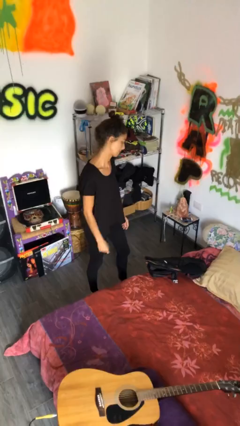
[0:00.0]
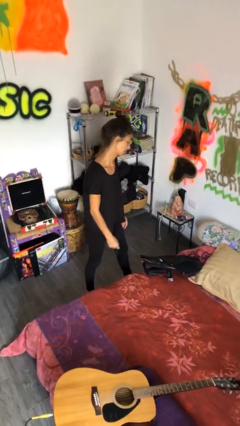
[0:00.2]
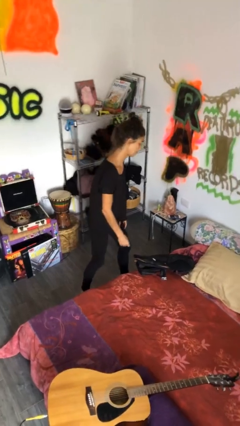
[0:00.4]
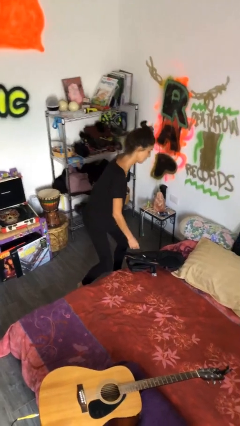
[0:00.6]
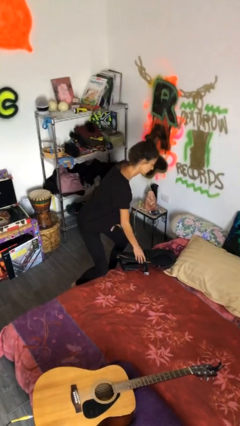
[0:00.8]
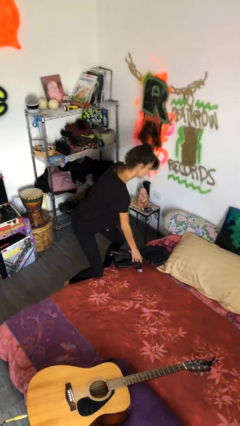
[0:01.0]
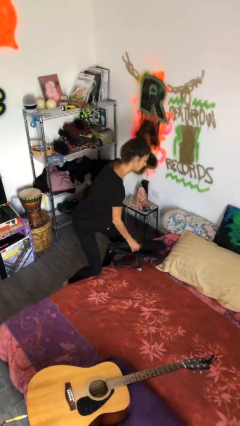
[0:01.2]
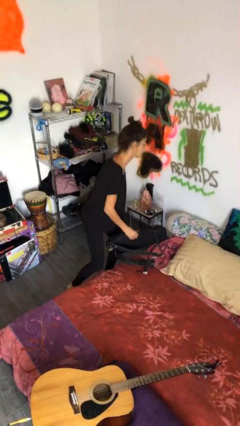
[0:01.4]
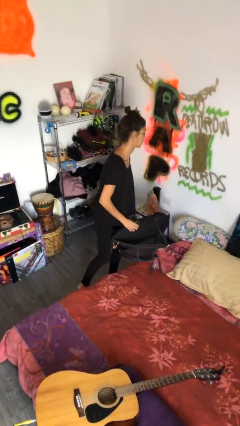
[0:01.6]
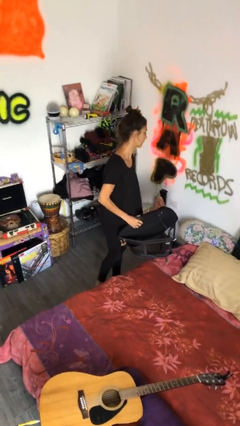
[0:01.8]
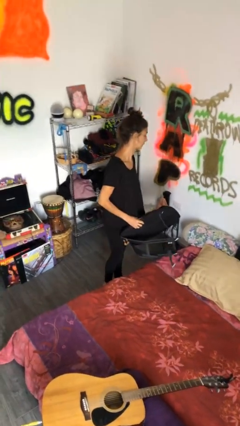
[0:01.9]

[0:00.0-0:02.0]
person picks up object from bed

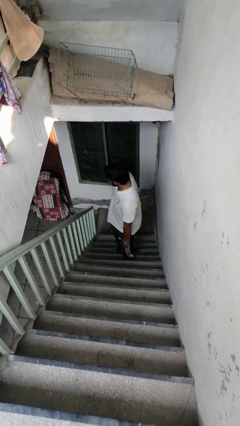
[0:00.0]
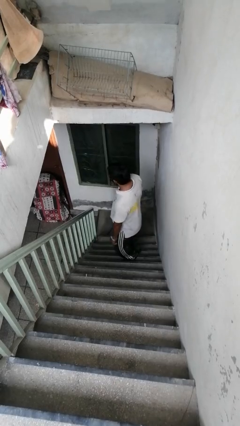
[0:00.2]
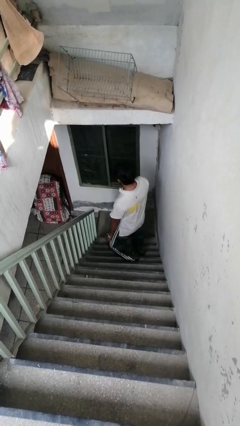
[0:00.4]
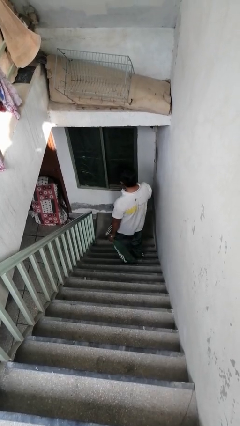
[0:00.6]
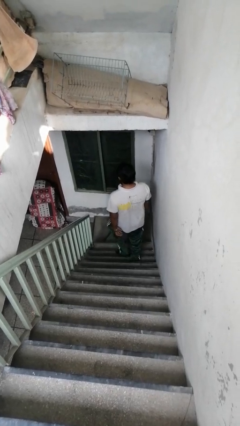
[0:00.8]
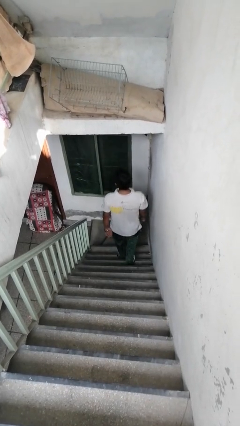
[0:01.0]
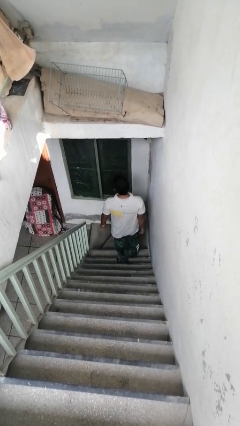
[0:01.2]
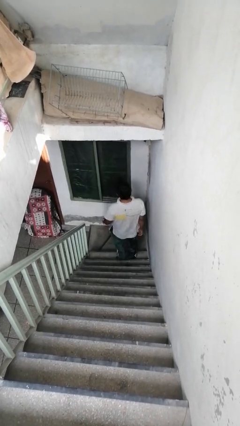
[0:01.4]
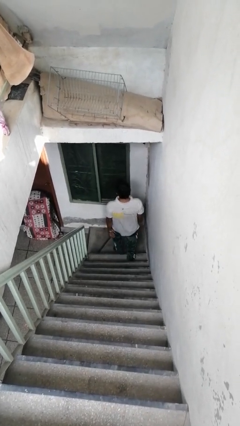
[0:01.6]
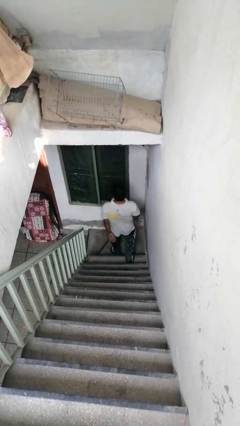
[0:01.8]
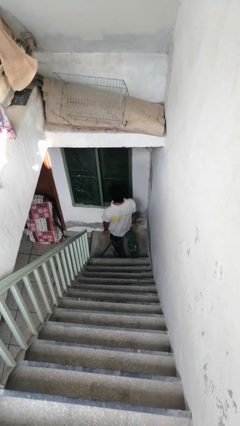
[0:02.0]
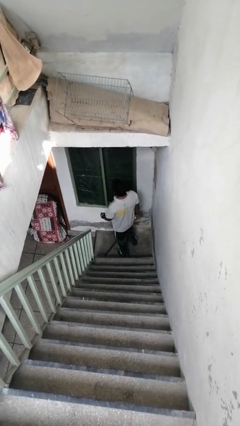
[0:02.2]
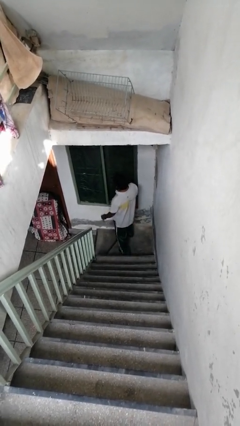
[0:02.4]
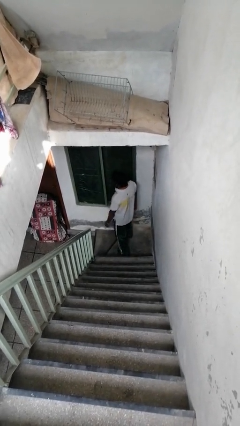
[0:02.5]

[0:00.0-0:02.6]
person climbs down stairs

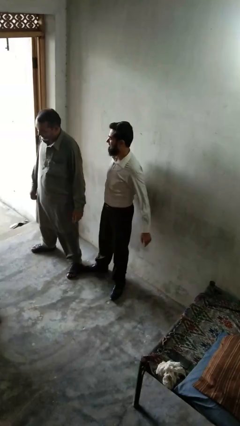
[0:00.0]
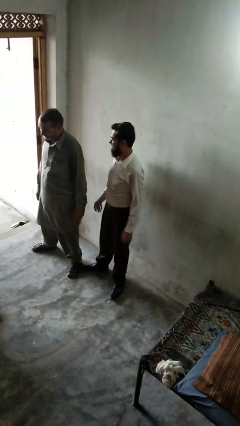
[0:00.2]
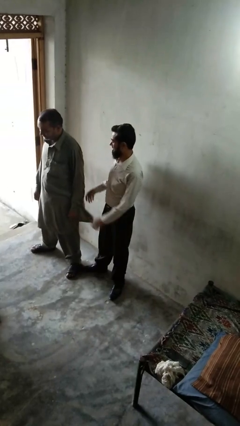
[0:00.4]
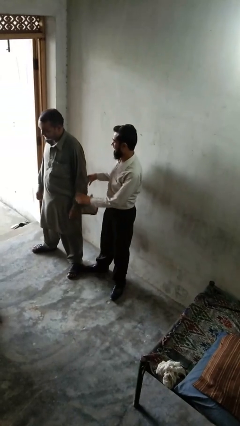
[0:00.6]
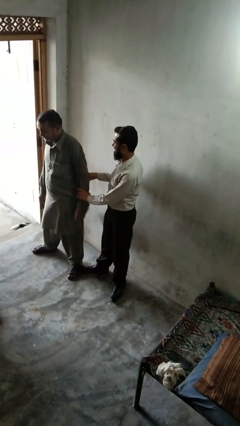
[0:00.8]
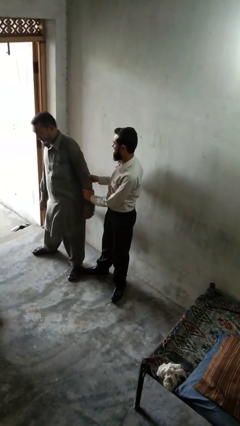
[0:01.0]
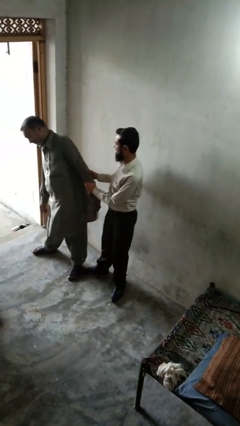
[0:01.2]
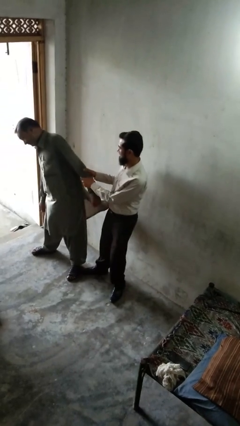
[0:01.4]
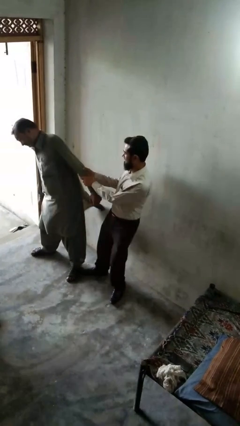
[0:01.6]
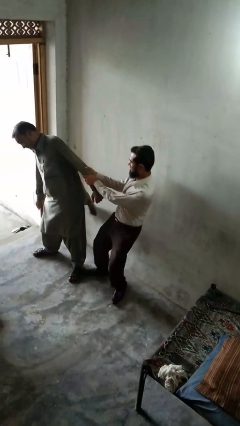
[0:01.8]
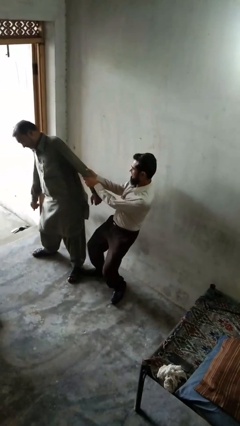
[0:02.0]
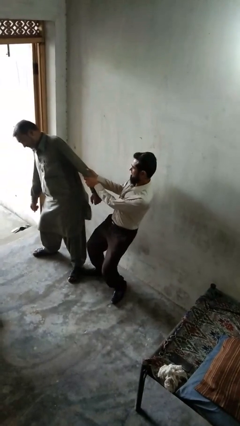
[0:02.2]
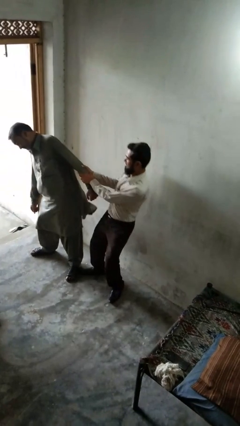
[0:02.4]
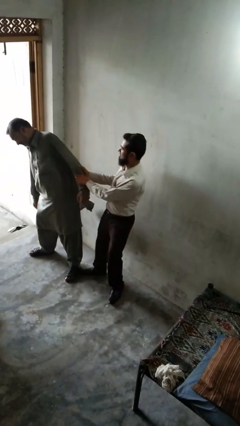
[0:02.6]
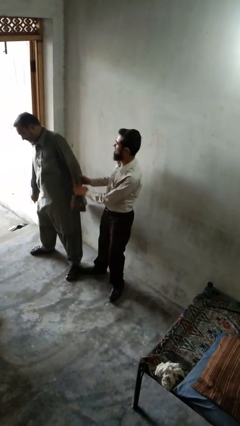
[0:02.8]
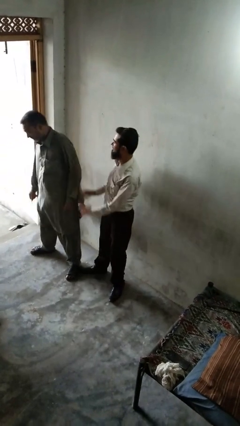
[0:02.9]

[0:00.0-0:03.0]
person grabs person by forearm

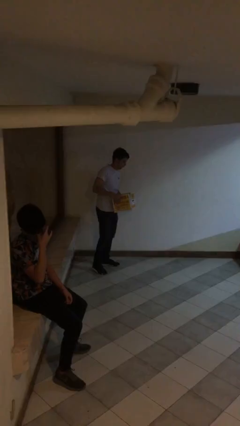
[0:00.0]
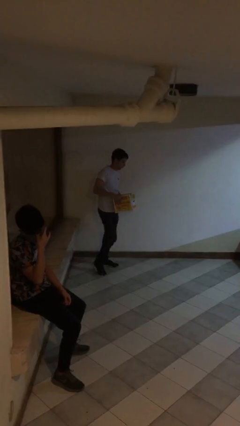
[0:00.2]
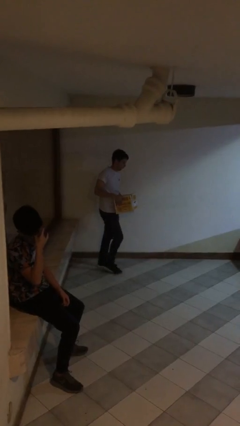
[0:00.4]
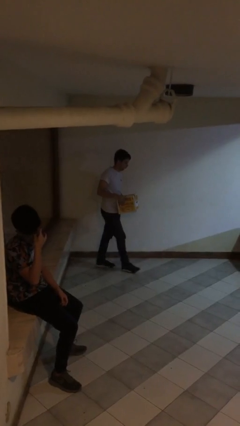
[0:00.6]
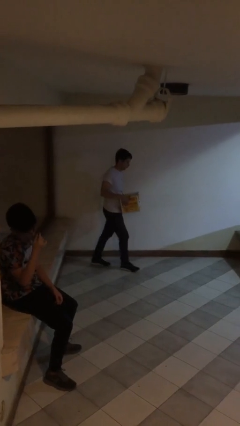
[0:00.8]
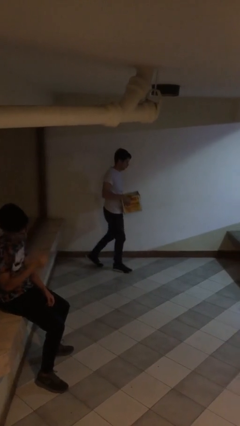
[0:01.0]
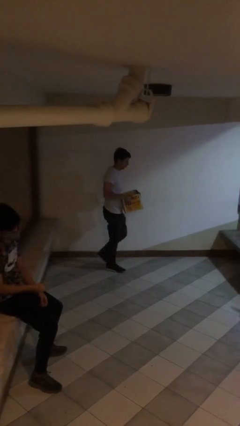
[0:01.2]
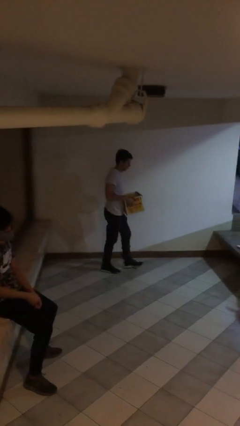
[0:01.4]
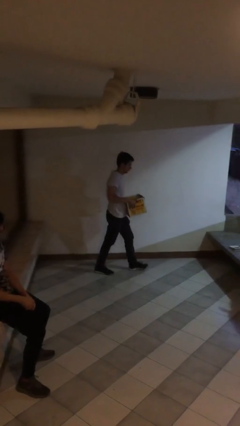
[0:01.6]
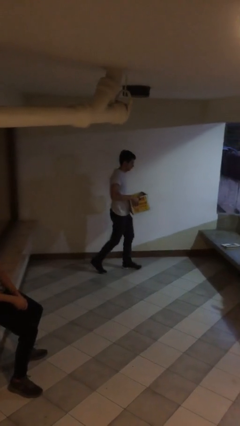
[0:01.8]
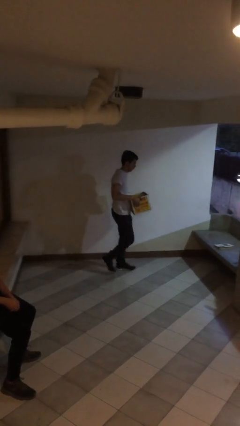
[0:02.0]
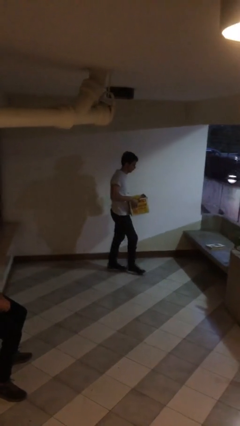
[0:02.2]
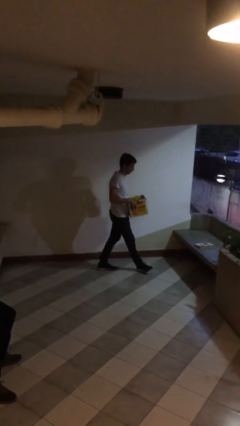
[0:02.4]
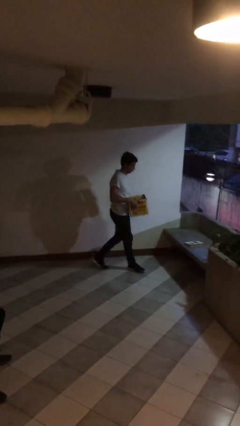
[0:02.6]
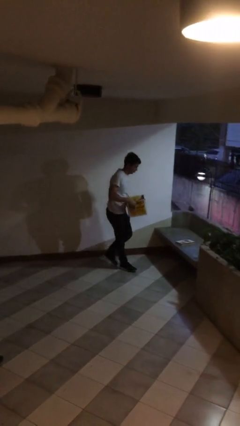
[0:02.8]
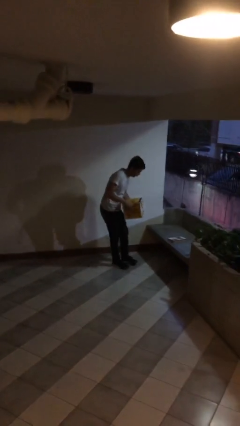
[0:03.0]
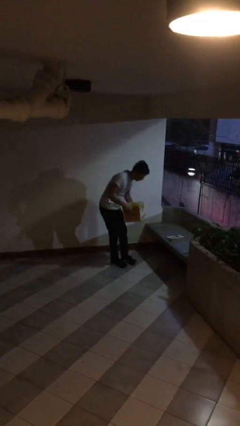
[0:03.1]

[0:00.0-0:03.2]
person carries heavy object

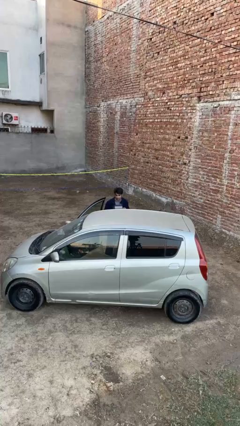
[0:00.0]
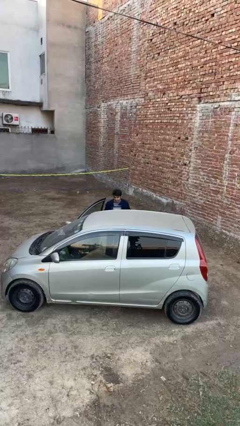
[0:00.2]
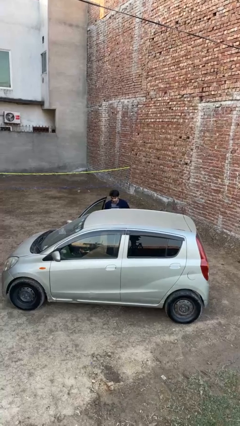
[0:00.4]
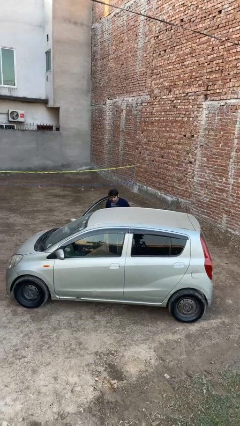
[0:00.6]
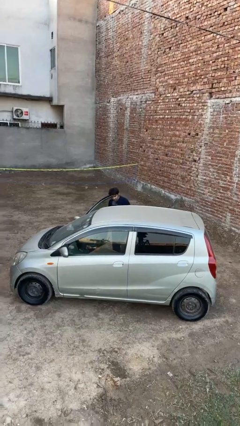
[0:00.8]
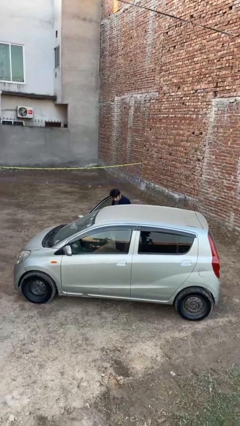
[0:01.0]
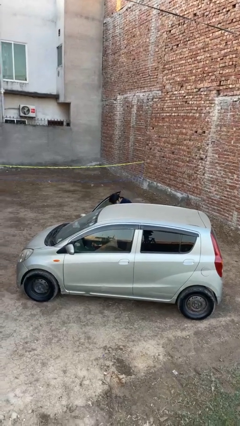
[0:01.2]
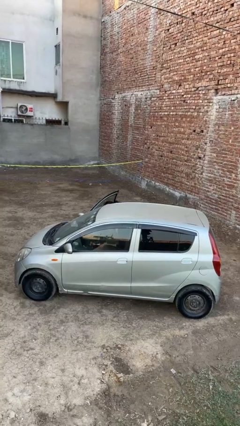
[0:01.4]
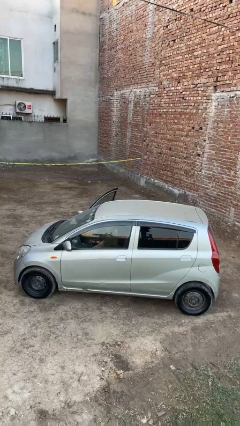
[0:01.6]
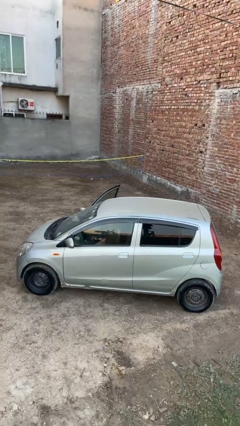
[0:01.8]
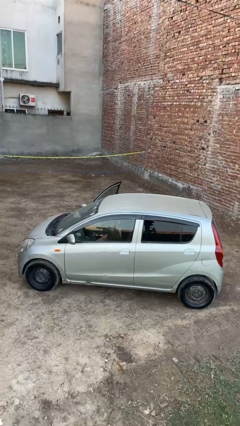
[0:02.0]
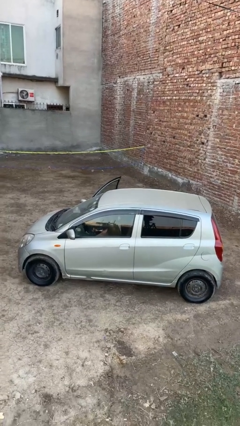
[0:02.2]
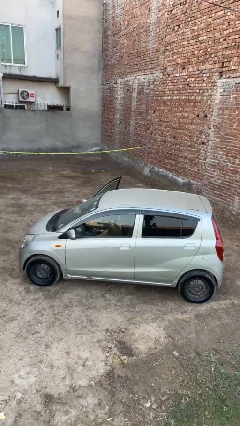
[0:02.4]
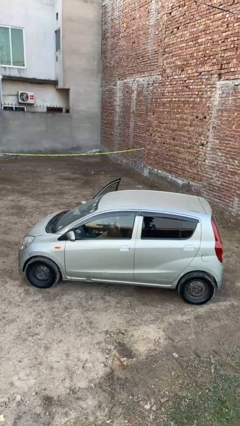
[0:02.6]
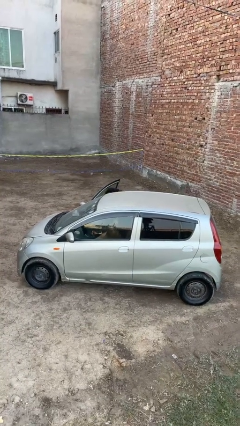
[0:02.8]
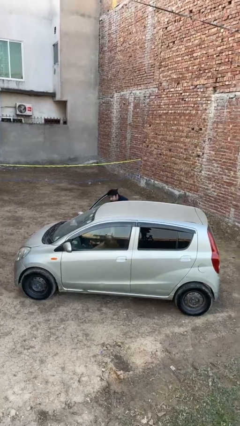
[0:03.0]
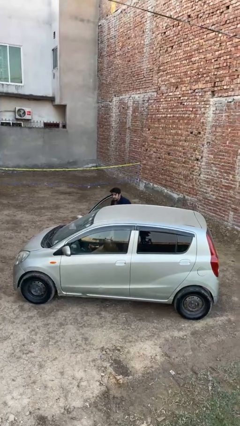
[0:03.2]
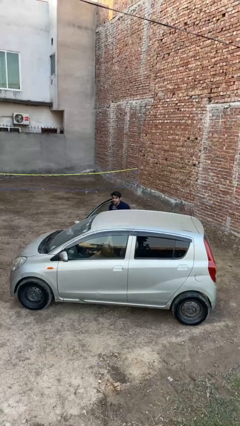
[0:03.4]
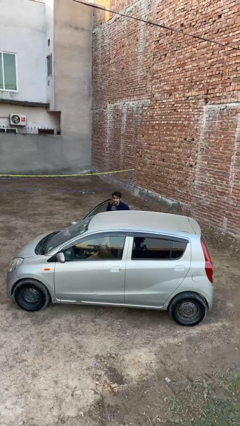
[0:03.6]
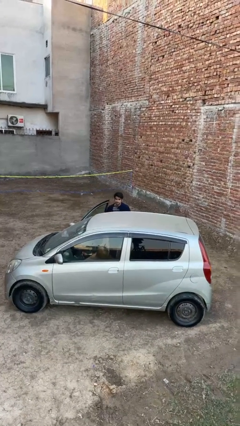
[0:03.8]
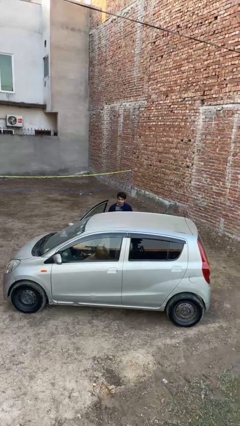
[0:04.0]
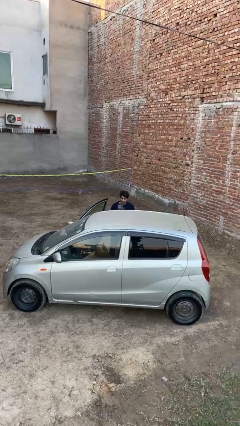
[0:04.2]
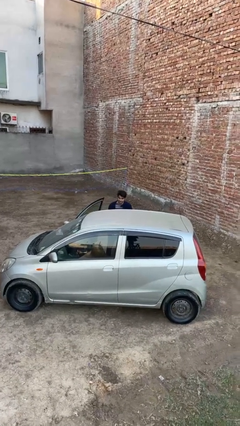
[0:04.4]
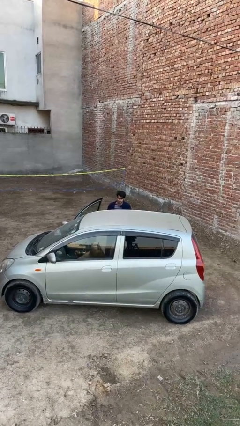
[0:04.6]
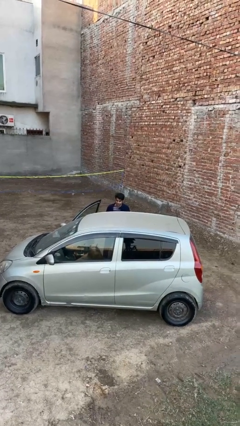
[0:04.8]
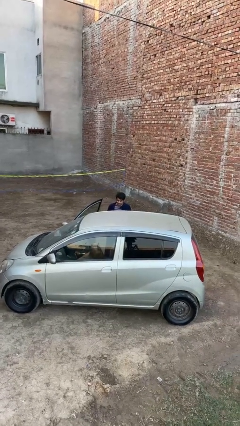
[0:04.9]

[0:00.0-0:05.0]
person loads car

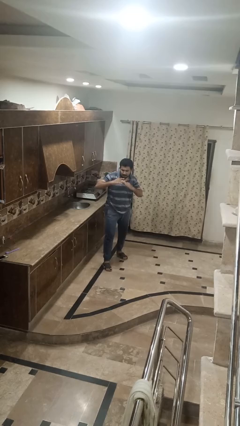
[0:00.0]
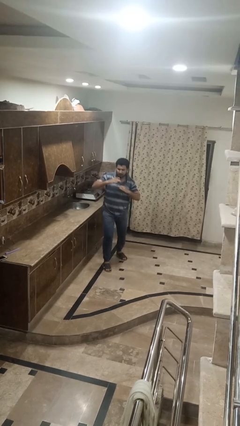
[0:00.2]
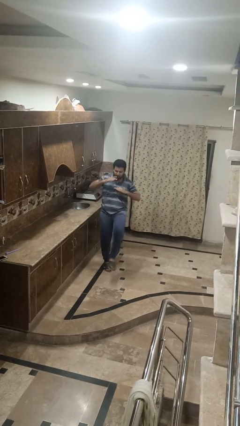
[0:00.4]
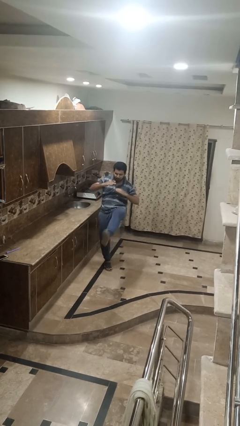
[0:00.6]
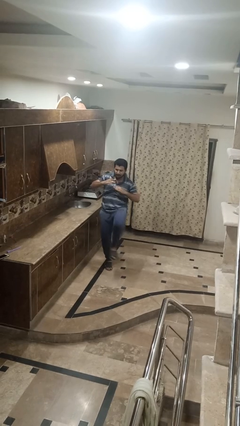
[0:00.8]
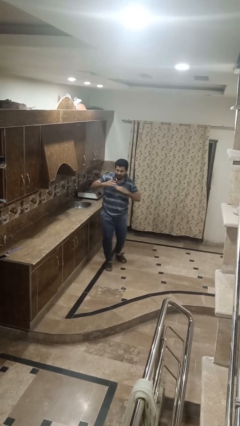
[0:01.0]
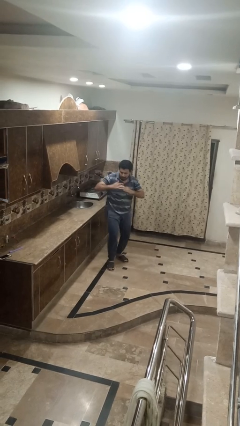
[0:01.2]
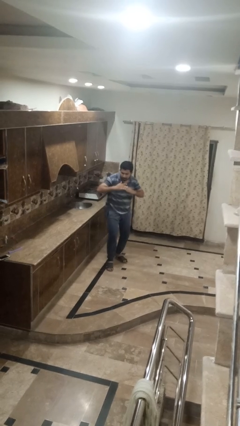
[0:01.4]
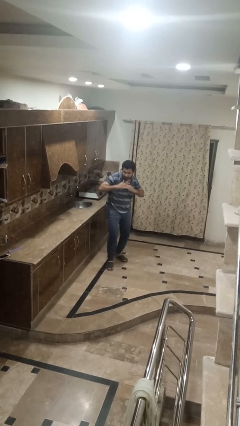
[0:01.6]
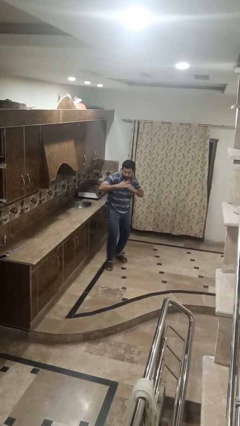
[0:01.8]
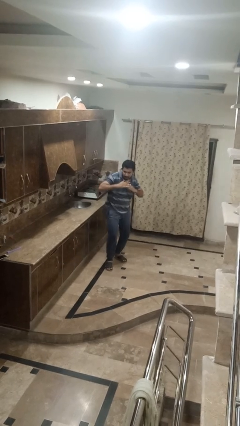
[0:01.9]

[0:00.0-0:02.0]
person karate kicks
